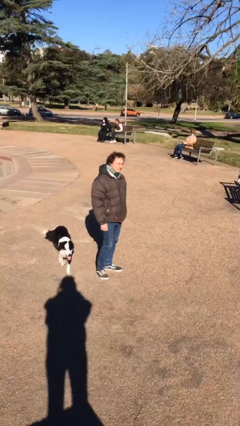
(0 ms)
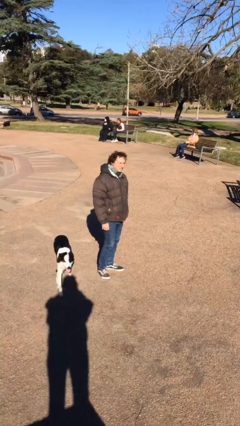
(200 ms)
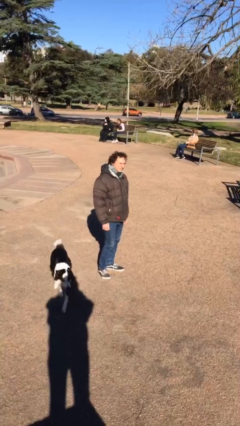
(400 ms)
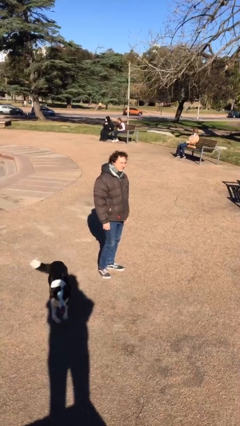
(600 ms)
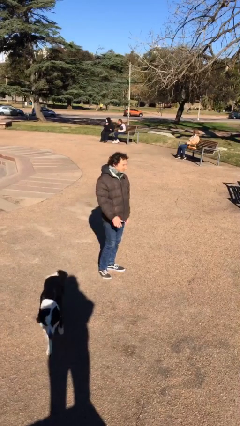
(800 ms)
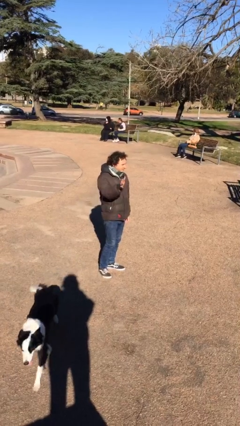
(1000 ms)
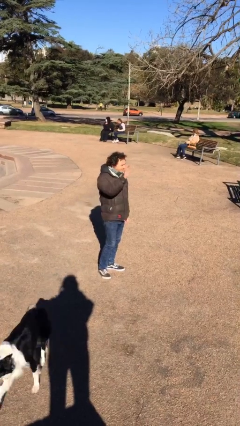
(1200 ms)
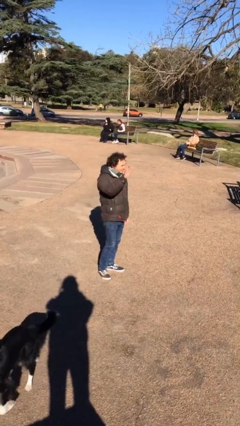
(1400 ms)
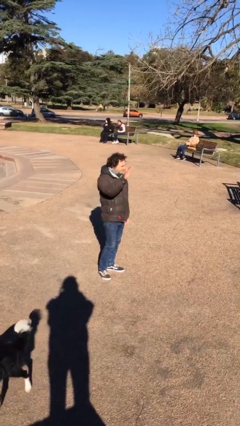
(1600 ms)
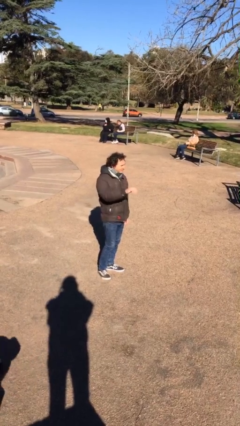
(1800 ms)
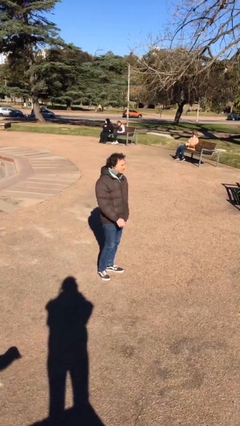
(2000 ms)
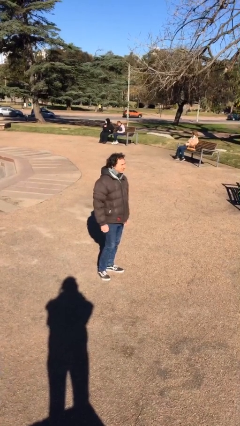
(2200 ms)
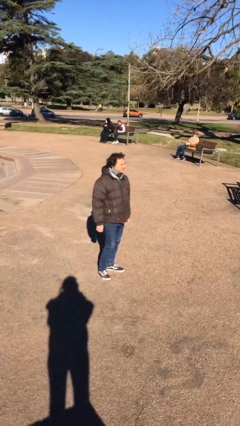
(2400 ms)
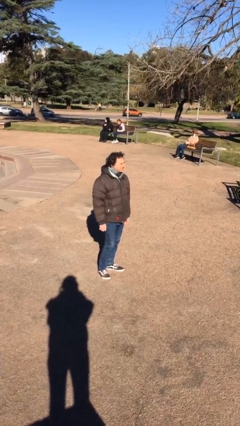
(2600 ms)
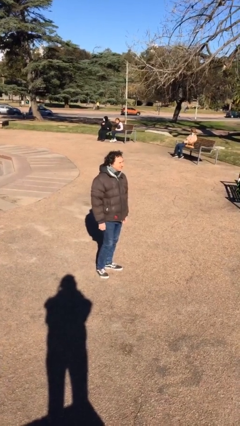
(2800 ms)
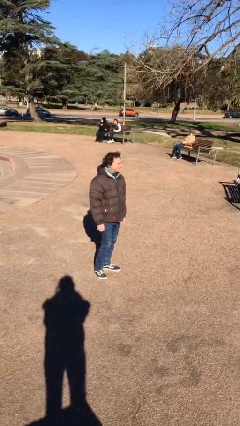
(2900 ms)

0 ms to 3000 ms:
person waves at person

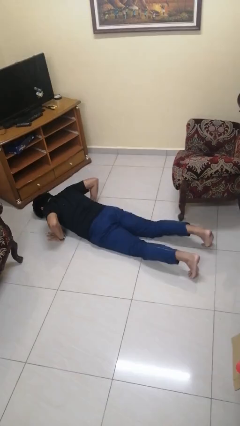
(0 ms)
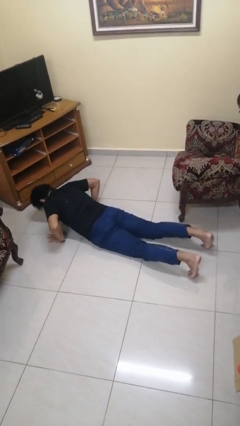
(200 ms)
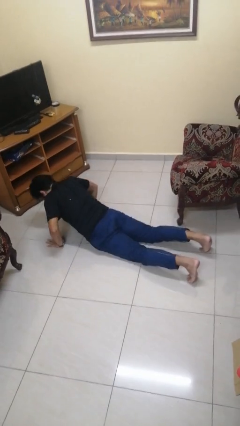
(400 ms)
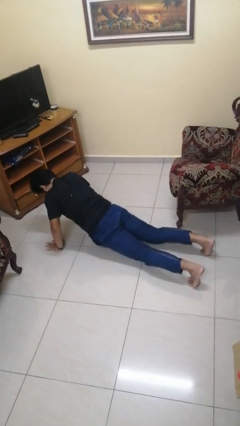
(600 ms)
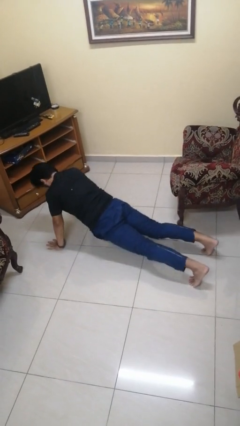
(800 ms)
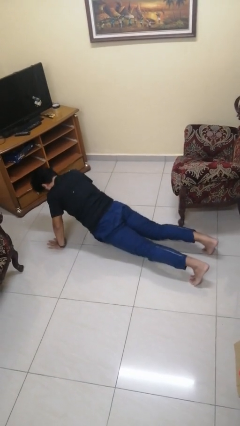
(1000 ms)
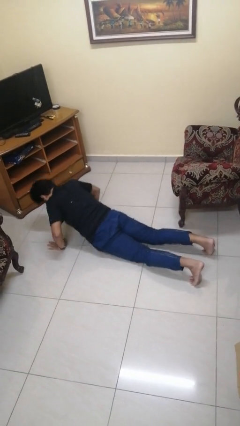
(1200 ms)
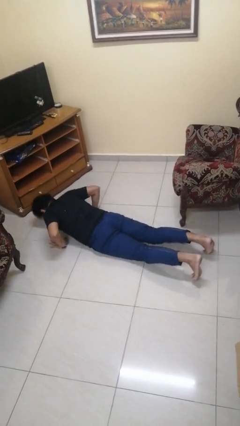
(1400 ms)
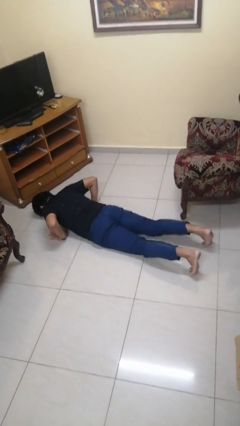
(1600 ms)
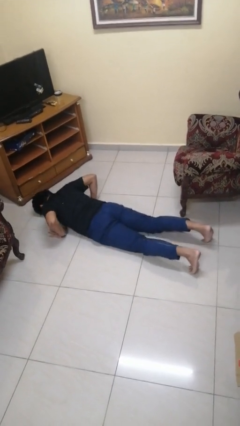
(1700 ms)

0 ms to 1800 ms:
person exercises with pushup

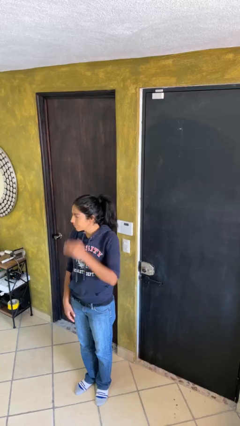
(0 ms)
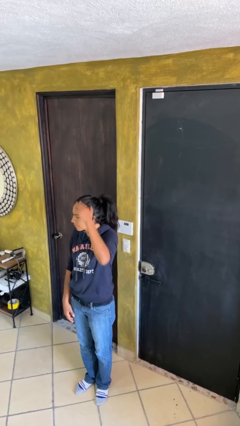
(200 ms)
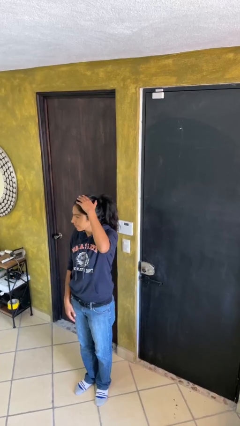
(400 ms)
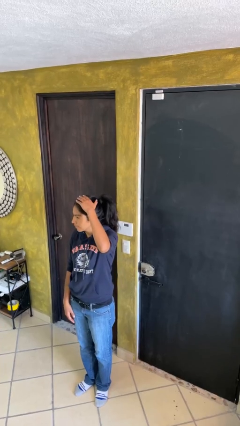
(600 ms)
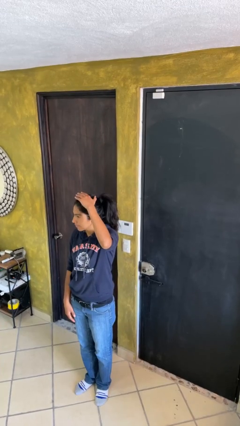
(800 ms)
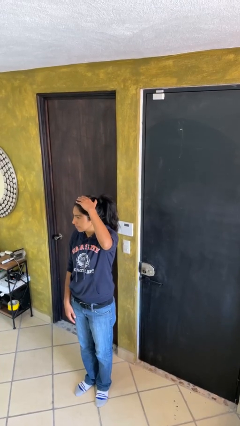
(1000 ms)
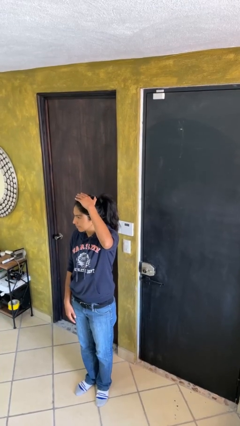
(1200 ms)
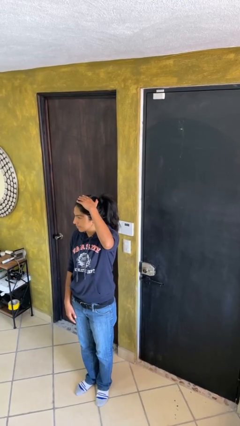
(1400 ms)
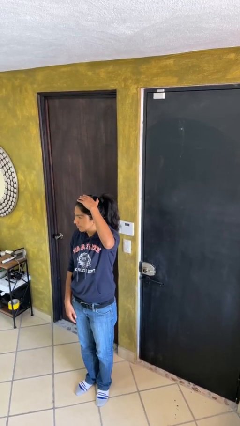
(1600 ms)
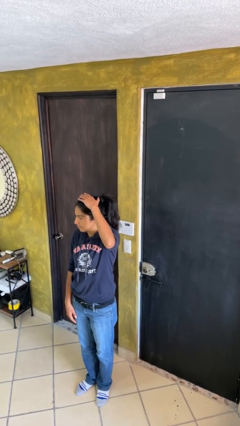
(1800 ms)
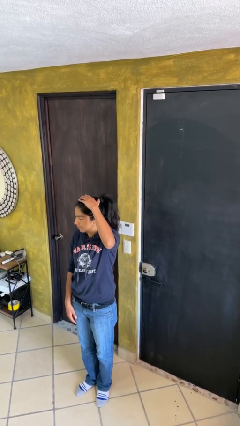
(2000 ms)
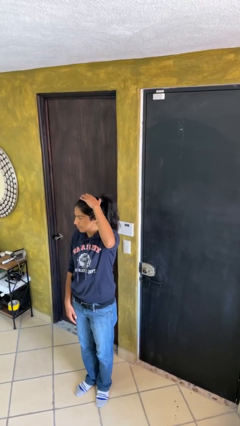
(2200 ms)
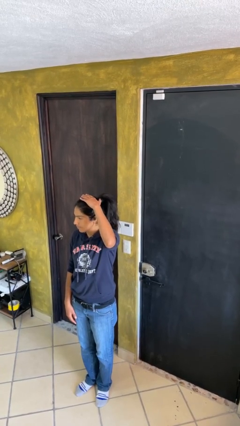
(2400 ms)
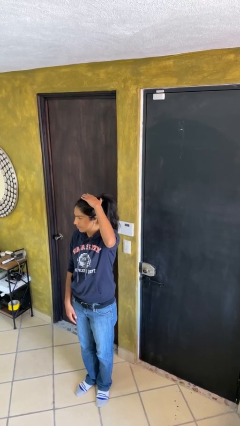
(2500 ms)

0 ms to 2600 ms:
person pats head

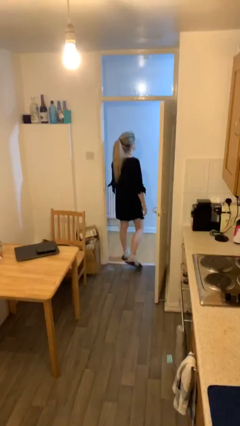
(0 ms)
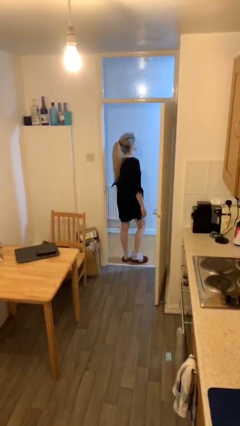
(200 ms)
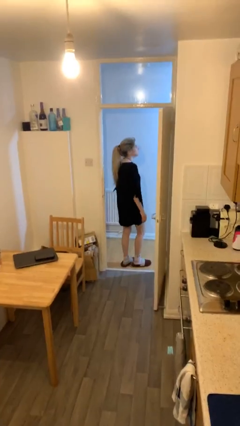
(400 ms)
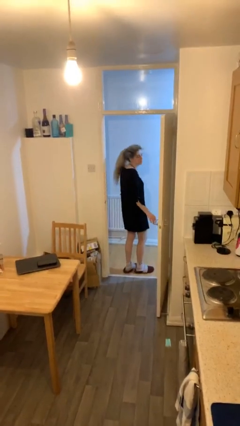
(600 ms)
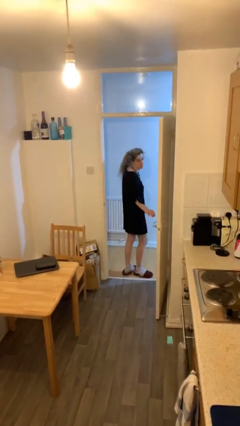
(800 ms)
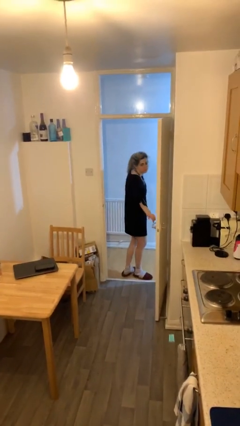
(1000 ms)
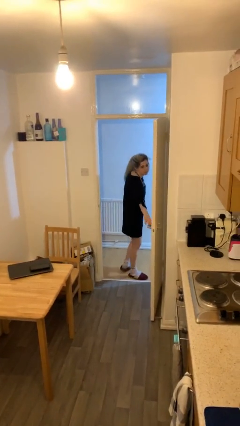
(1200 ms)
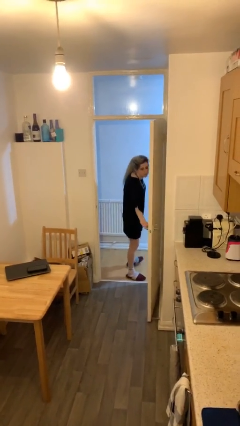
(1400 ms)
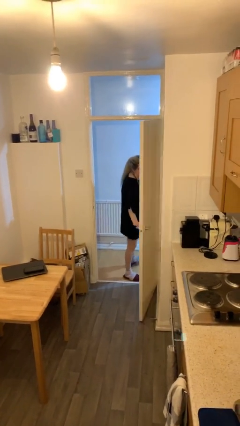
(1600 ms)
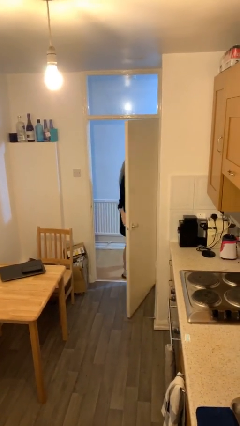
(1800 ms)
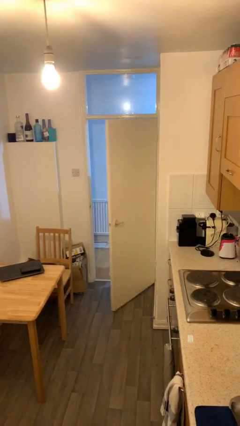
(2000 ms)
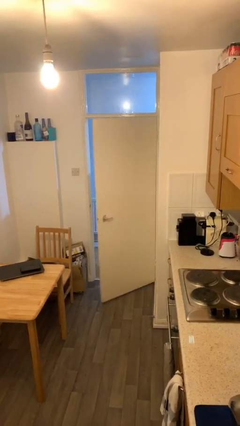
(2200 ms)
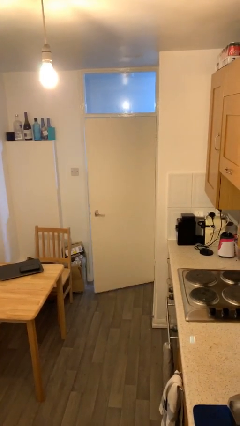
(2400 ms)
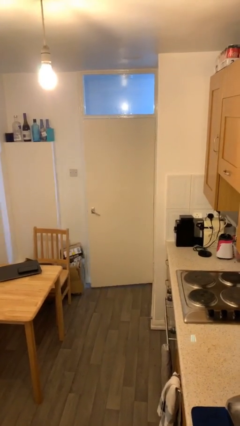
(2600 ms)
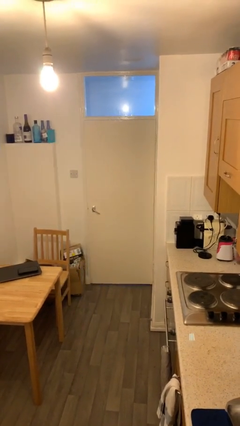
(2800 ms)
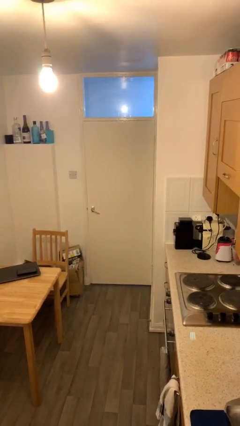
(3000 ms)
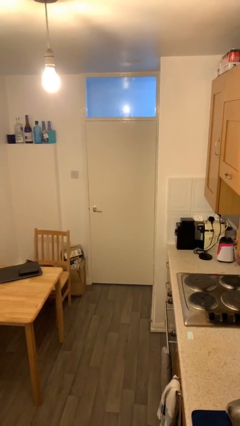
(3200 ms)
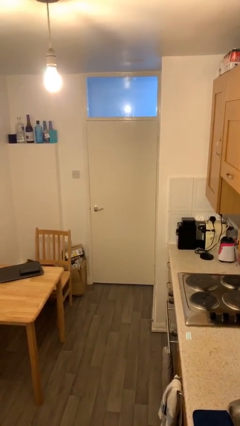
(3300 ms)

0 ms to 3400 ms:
person closes facility door

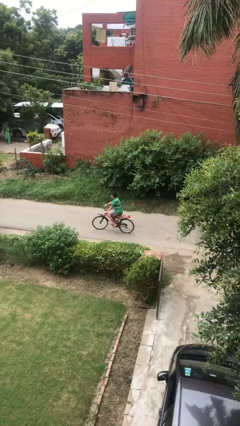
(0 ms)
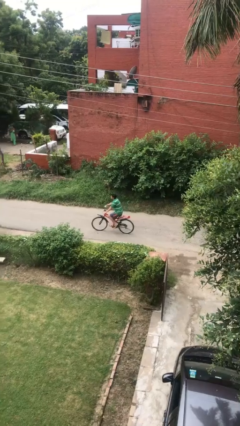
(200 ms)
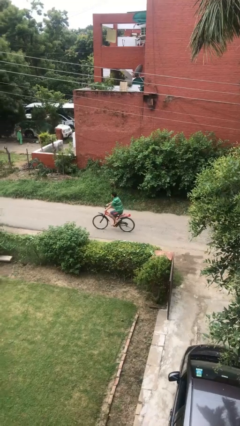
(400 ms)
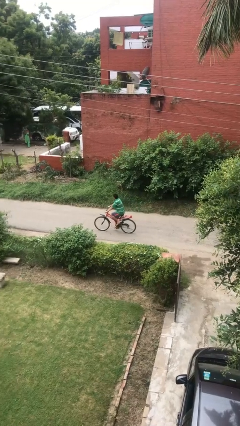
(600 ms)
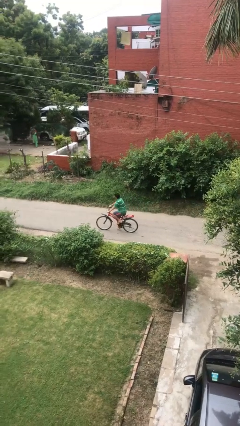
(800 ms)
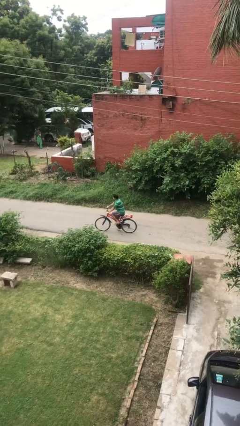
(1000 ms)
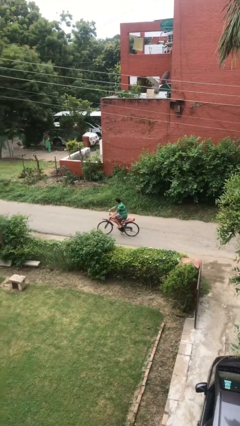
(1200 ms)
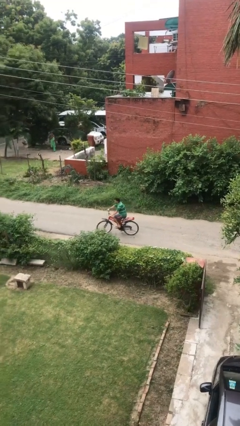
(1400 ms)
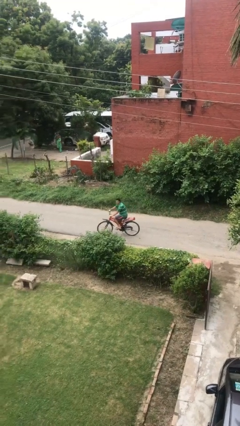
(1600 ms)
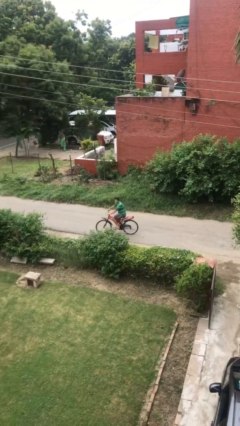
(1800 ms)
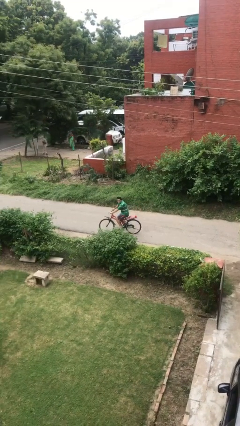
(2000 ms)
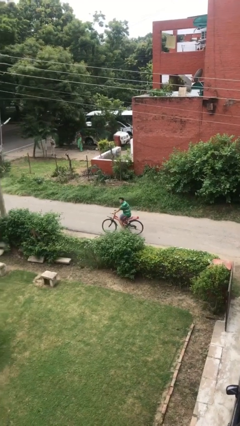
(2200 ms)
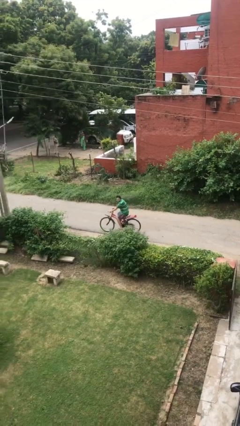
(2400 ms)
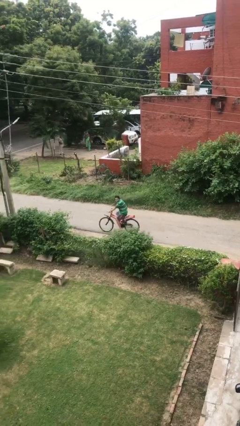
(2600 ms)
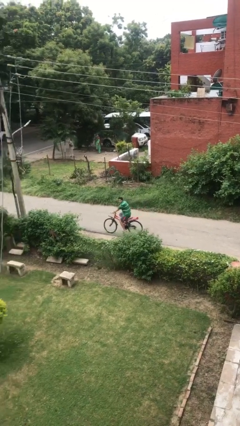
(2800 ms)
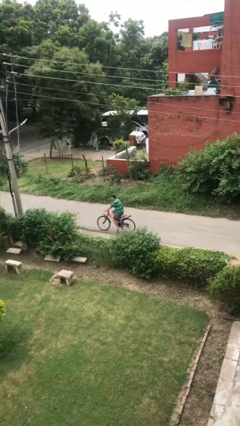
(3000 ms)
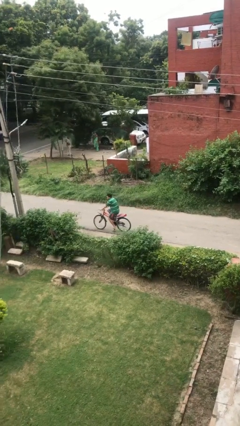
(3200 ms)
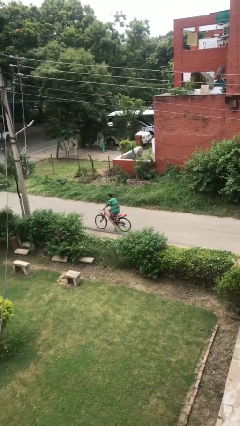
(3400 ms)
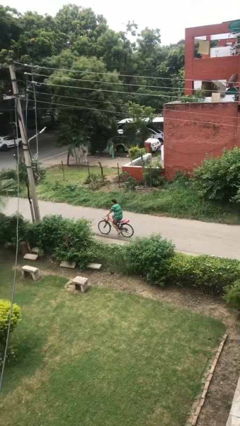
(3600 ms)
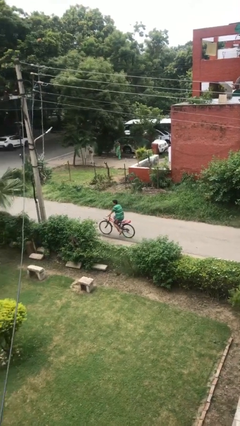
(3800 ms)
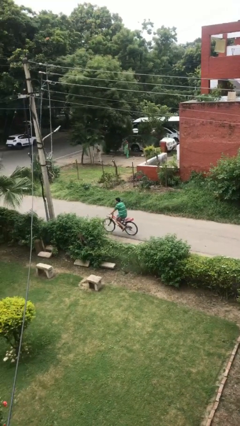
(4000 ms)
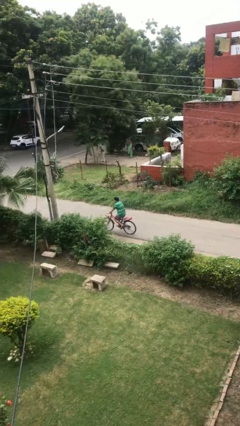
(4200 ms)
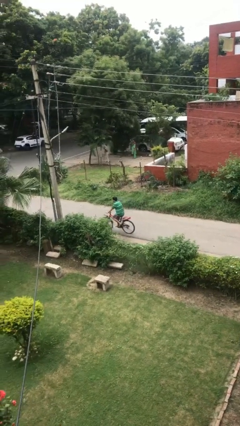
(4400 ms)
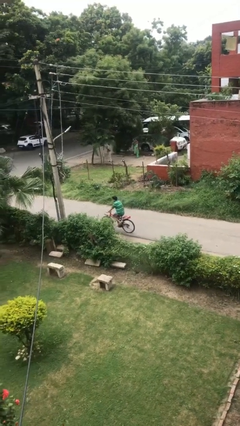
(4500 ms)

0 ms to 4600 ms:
person rides bicycle

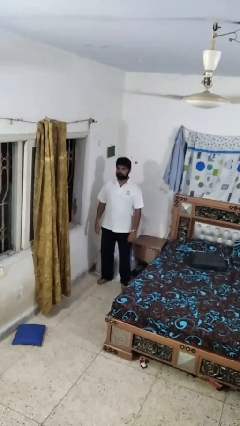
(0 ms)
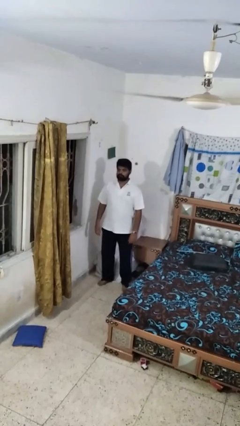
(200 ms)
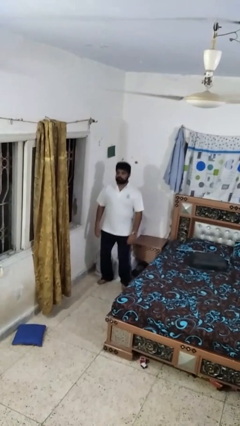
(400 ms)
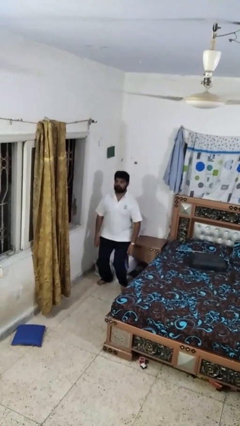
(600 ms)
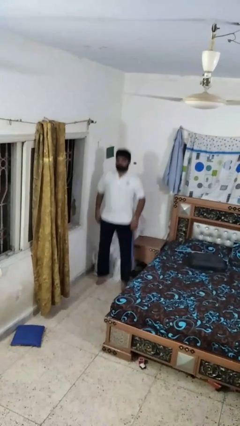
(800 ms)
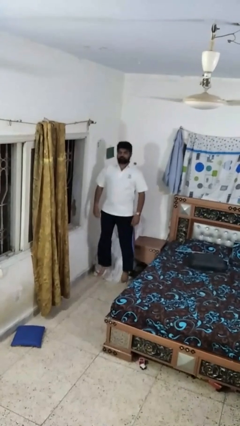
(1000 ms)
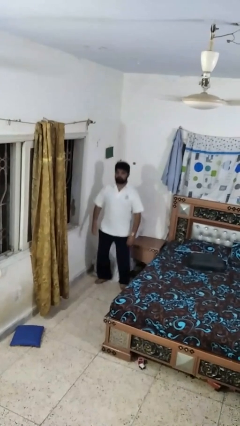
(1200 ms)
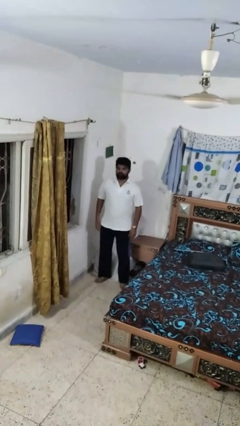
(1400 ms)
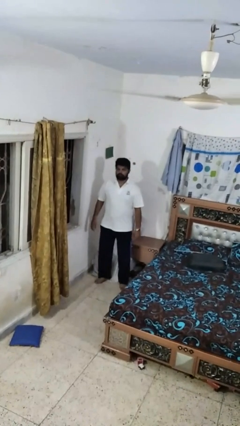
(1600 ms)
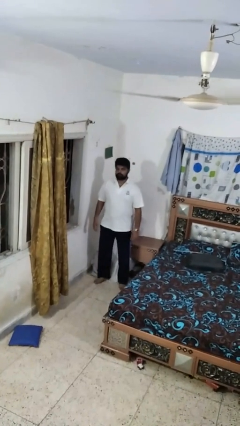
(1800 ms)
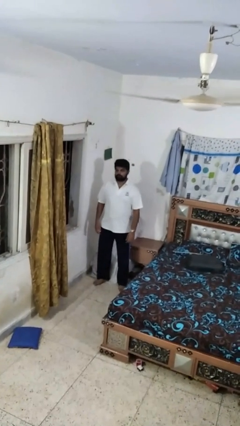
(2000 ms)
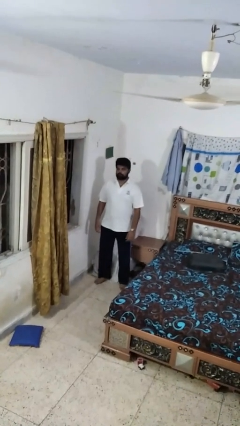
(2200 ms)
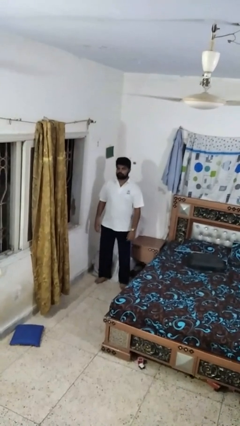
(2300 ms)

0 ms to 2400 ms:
person jumps
